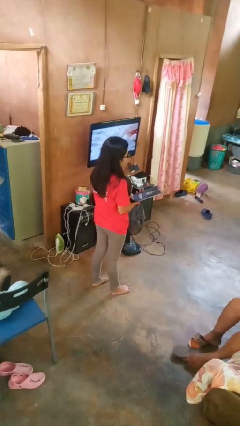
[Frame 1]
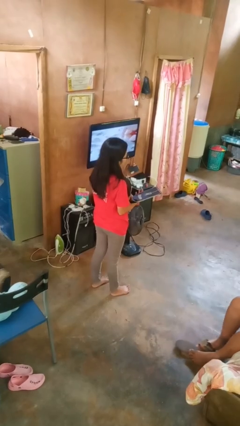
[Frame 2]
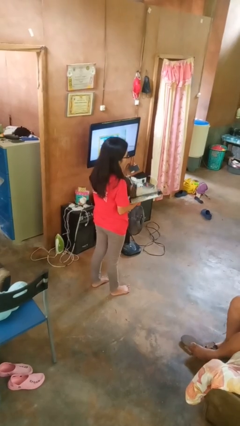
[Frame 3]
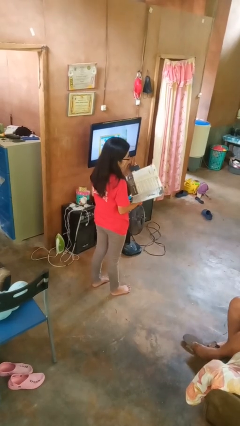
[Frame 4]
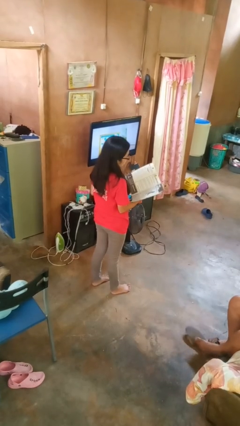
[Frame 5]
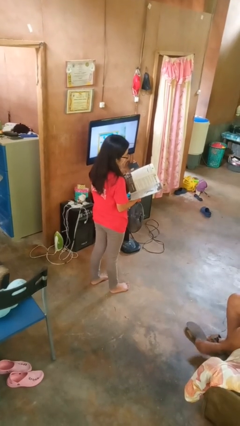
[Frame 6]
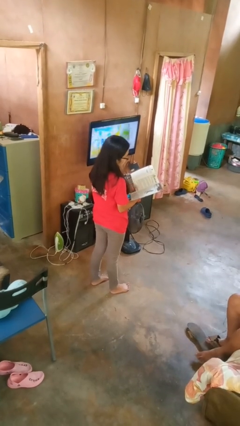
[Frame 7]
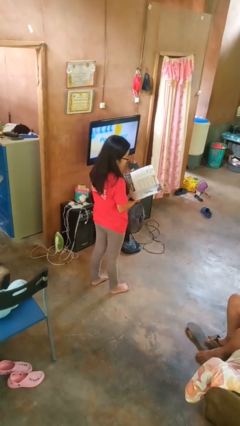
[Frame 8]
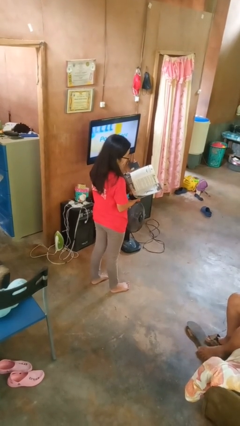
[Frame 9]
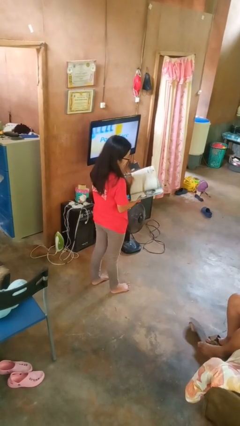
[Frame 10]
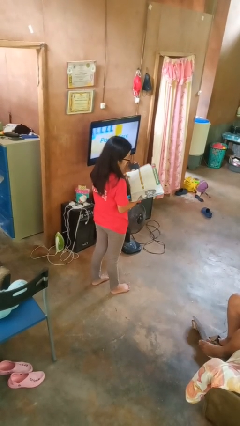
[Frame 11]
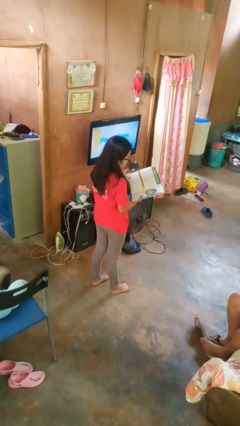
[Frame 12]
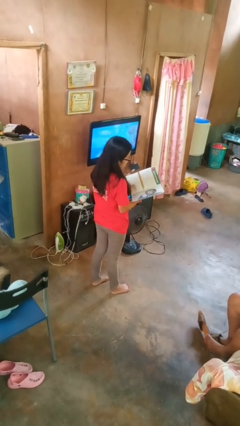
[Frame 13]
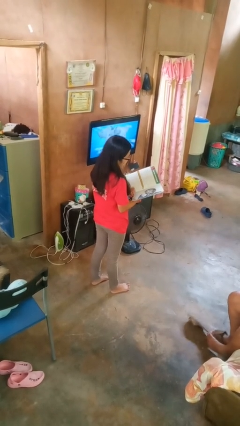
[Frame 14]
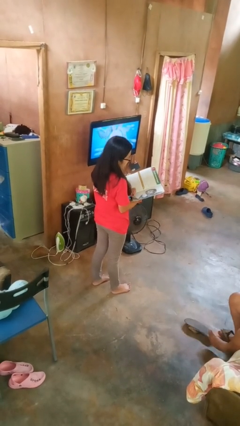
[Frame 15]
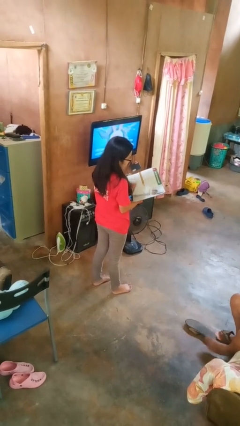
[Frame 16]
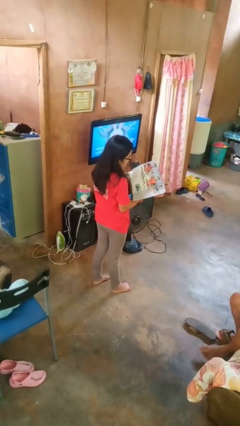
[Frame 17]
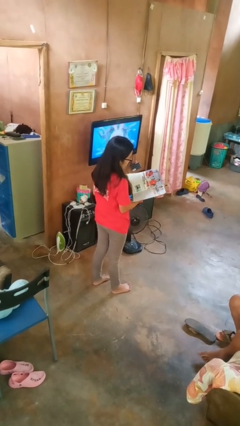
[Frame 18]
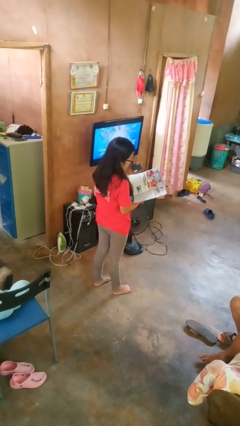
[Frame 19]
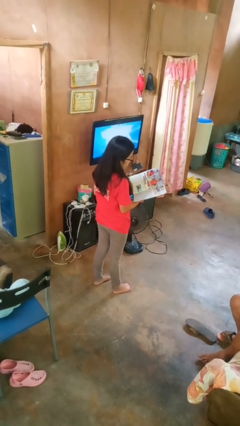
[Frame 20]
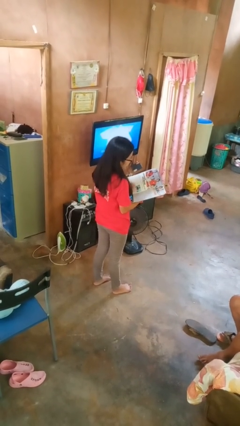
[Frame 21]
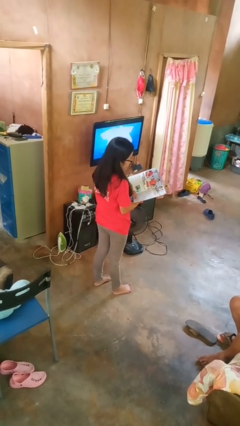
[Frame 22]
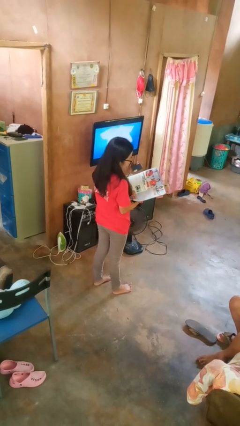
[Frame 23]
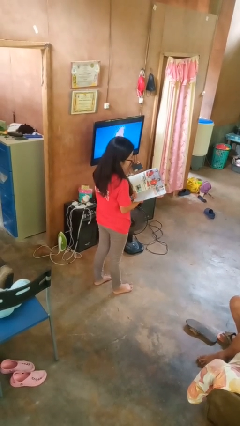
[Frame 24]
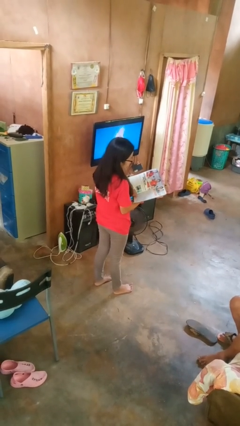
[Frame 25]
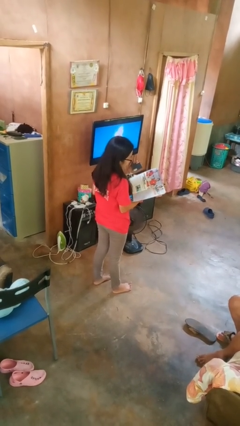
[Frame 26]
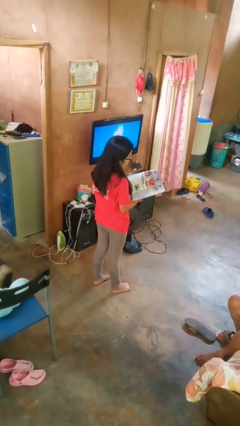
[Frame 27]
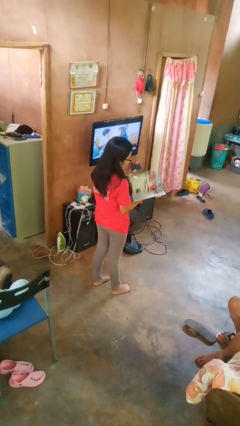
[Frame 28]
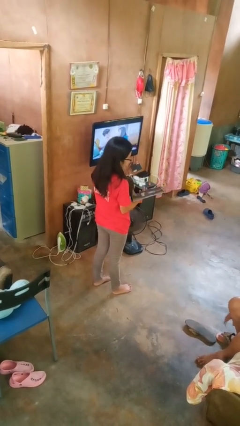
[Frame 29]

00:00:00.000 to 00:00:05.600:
person reads magazine

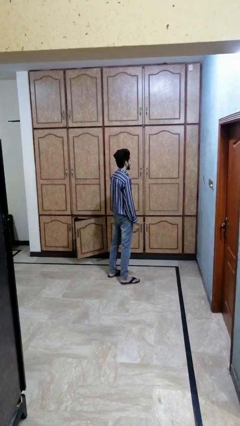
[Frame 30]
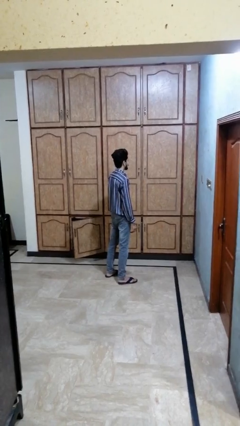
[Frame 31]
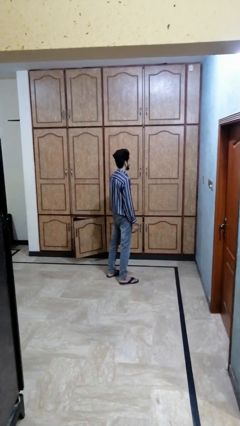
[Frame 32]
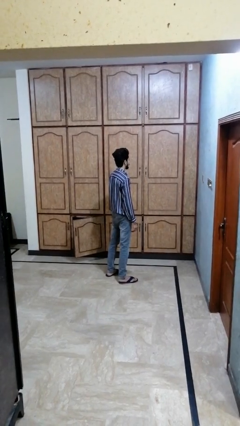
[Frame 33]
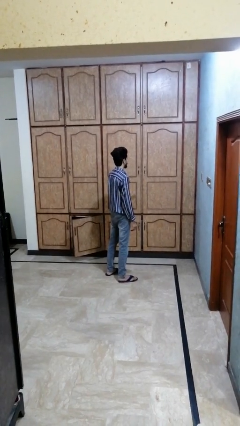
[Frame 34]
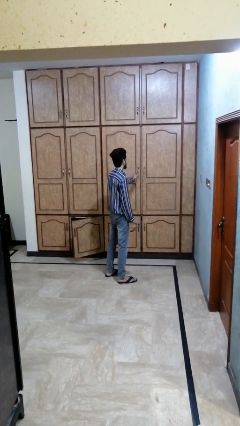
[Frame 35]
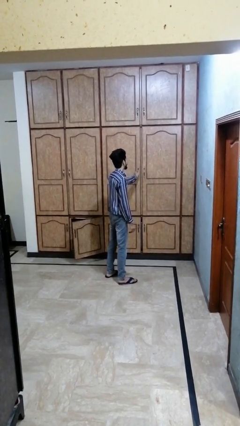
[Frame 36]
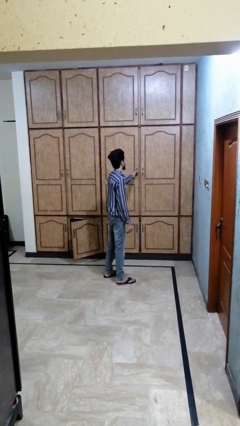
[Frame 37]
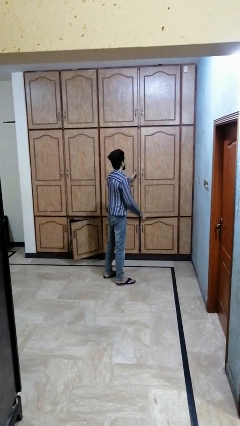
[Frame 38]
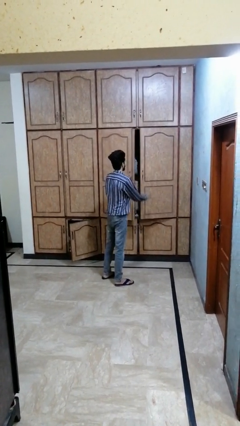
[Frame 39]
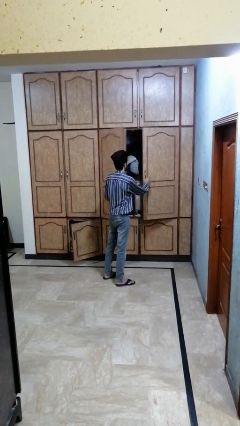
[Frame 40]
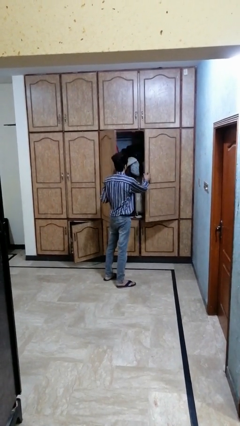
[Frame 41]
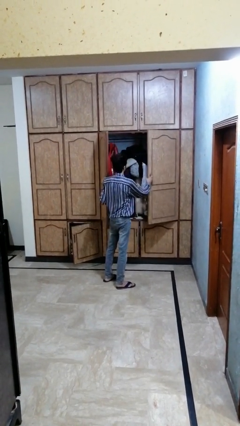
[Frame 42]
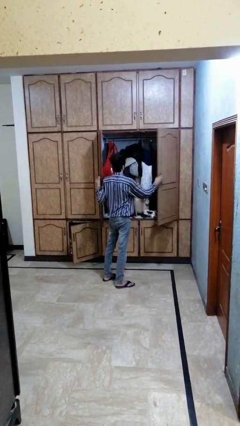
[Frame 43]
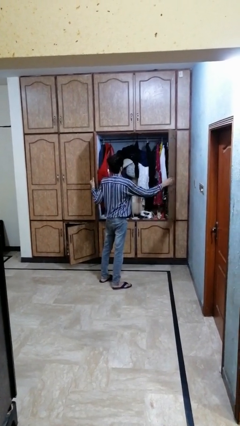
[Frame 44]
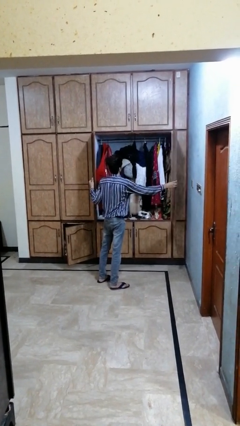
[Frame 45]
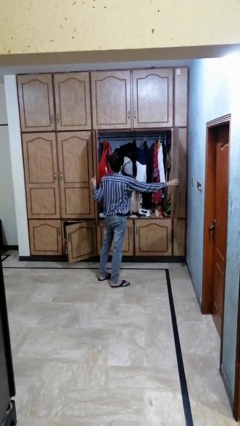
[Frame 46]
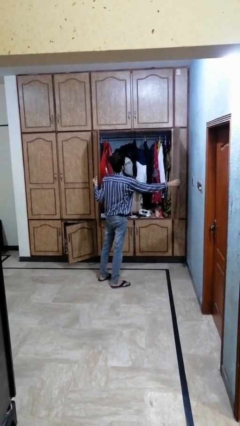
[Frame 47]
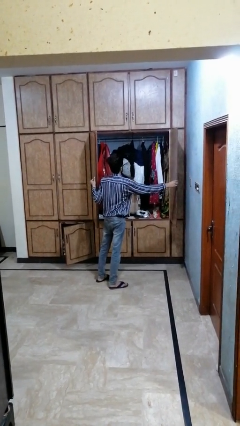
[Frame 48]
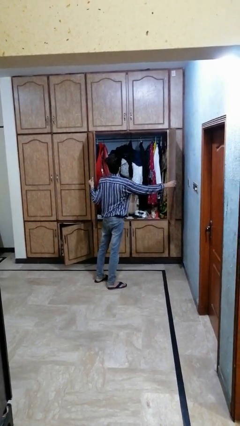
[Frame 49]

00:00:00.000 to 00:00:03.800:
person opens dresser drawer

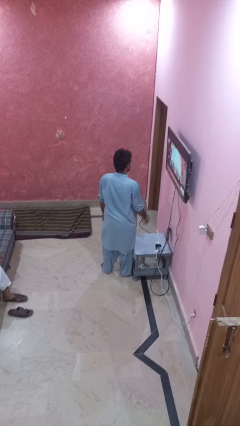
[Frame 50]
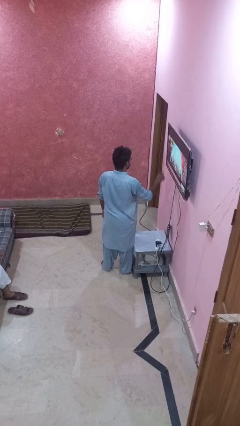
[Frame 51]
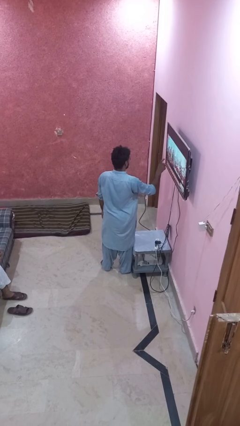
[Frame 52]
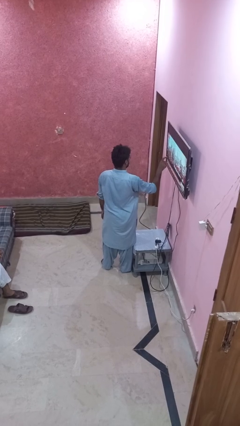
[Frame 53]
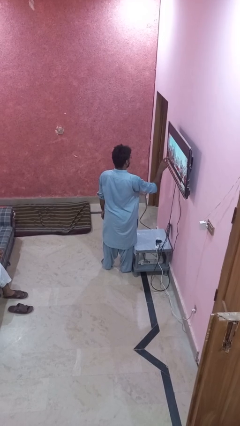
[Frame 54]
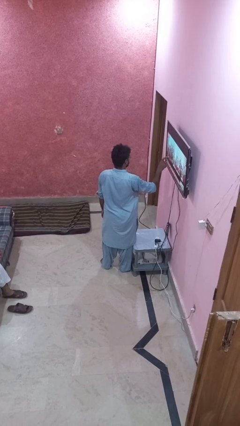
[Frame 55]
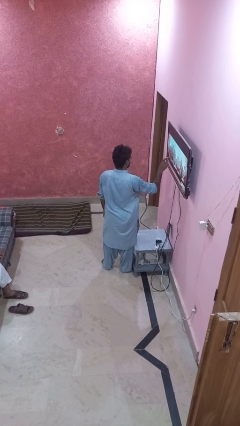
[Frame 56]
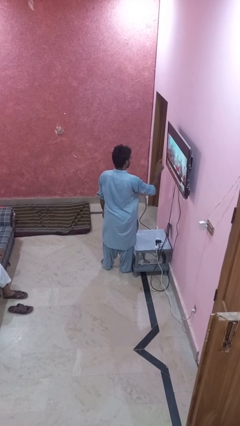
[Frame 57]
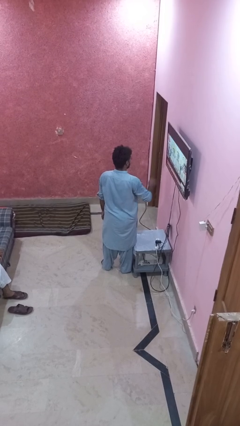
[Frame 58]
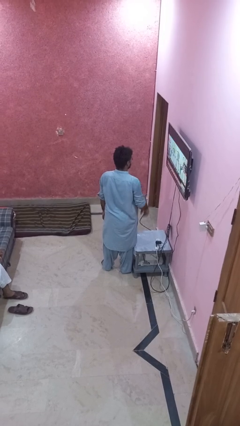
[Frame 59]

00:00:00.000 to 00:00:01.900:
person taps object with finger

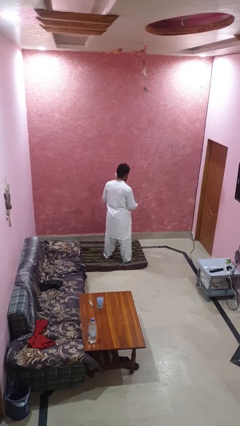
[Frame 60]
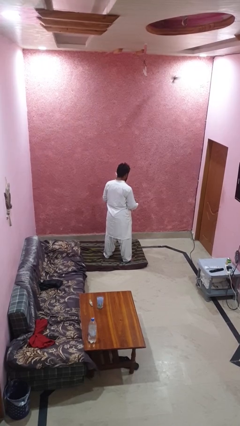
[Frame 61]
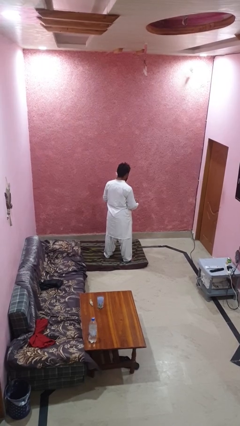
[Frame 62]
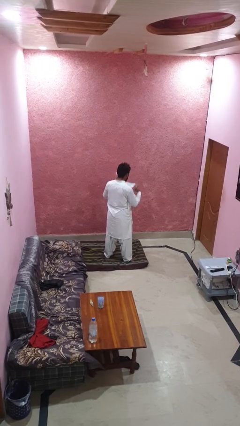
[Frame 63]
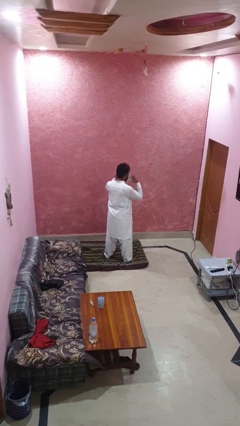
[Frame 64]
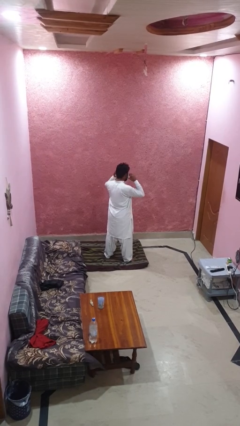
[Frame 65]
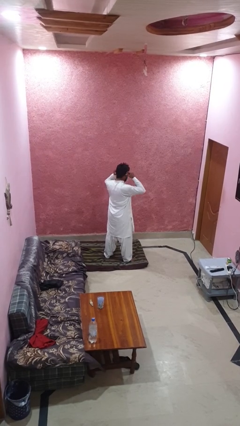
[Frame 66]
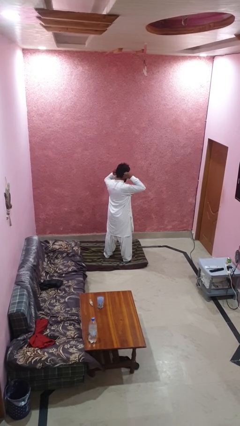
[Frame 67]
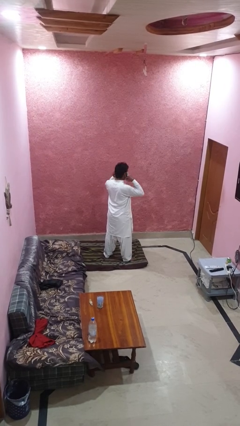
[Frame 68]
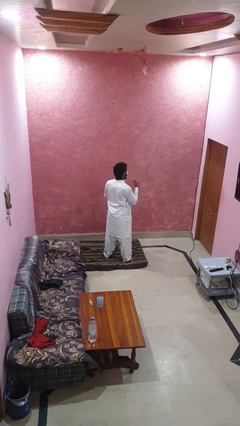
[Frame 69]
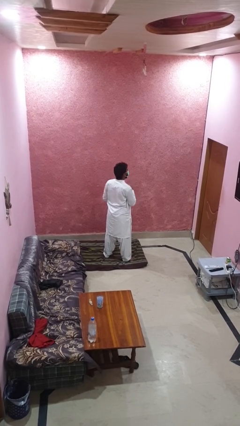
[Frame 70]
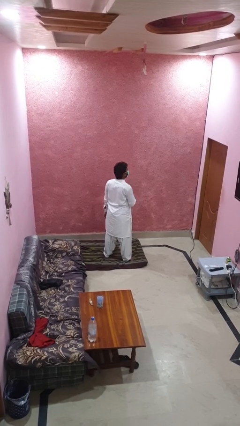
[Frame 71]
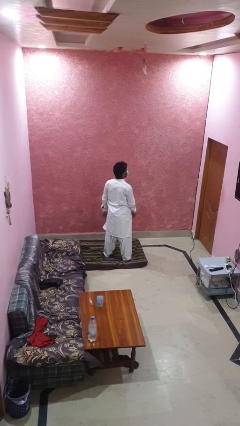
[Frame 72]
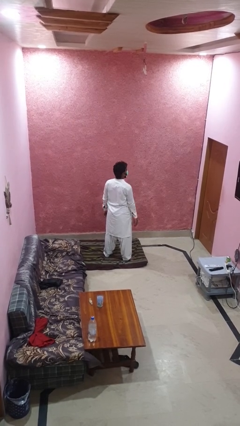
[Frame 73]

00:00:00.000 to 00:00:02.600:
person puts on facemask

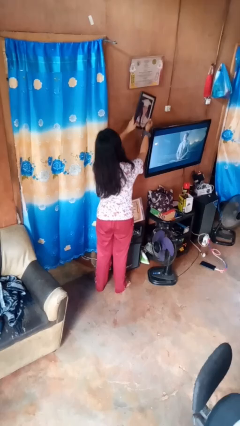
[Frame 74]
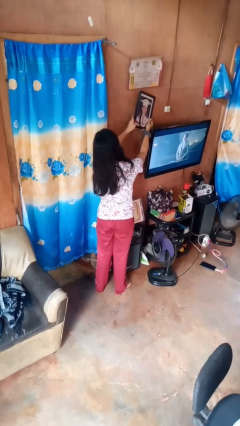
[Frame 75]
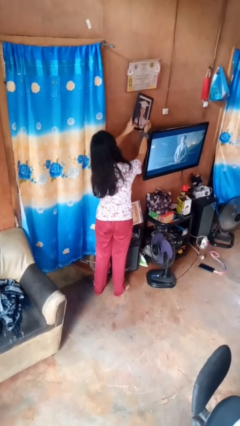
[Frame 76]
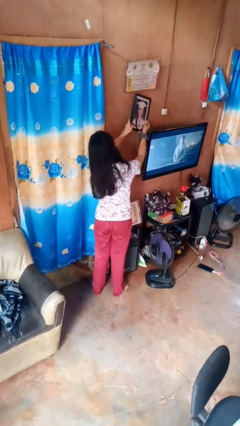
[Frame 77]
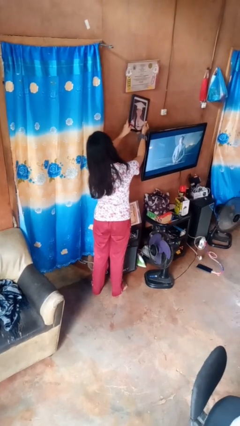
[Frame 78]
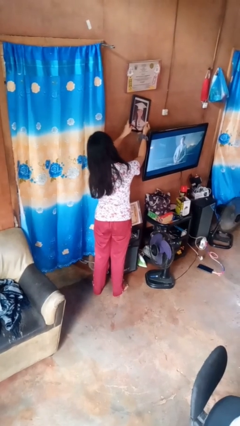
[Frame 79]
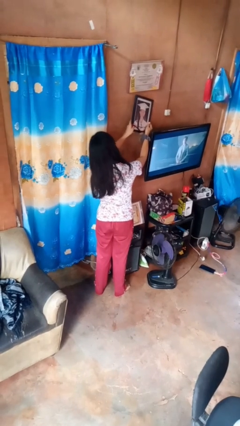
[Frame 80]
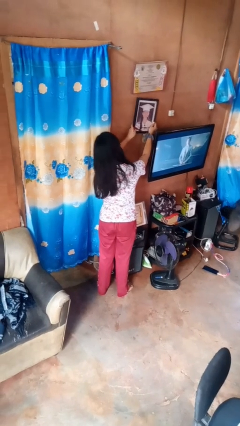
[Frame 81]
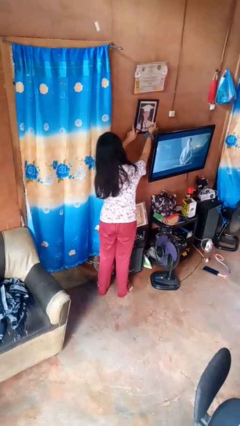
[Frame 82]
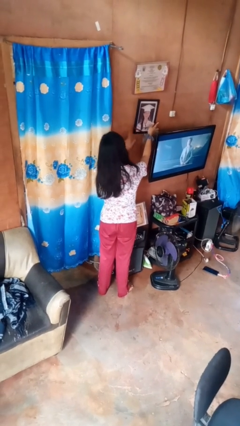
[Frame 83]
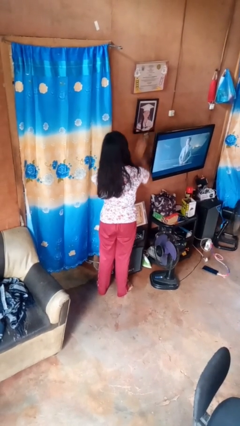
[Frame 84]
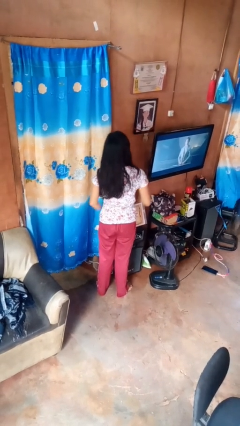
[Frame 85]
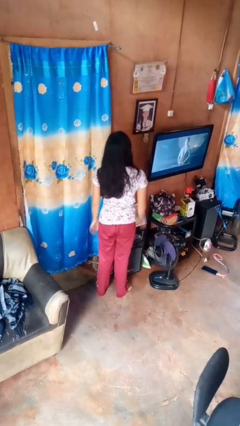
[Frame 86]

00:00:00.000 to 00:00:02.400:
person puts up picture frame

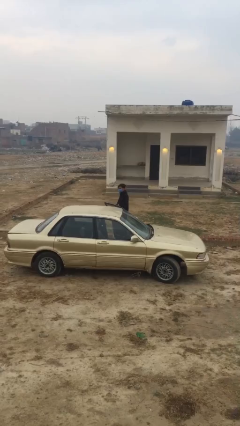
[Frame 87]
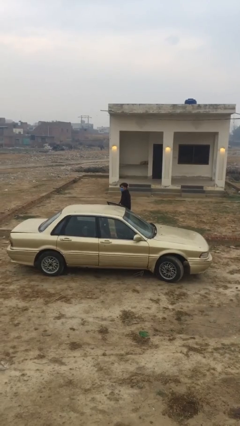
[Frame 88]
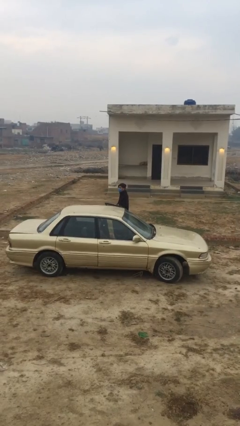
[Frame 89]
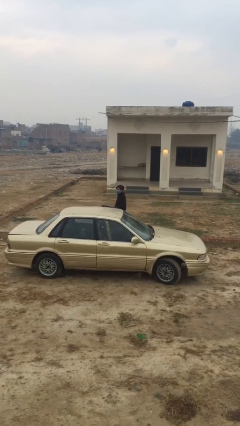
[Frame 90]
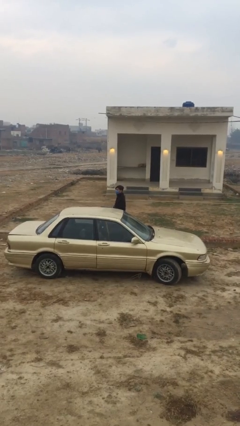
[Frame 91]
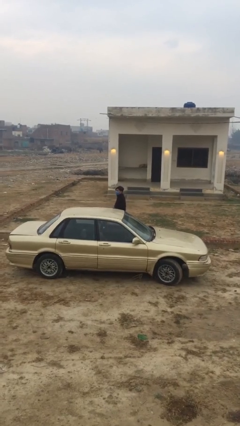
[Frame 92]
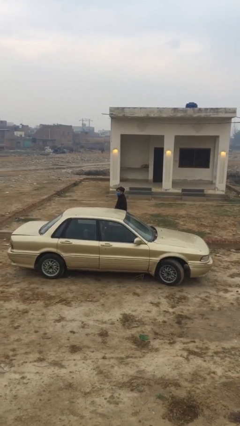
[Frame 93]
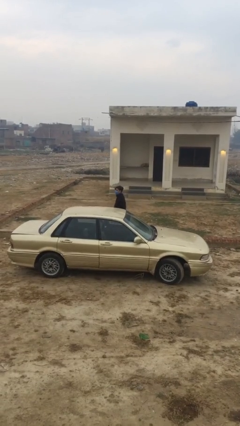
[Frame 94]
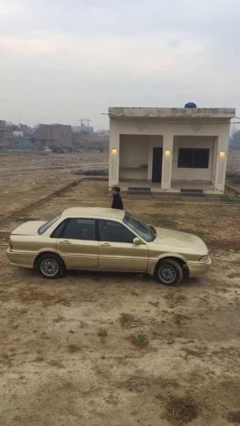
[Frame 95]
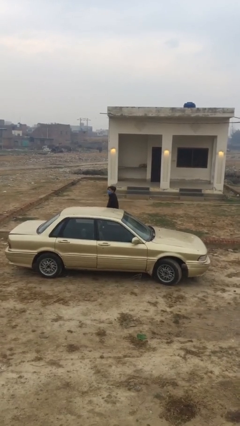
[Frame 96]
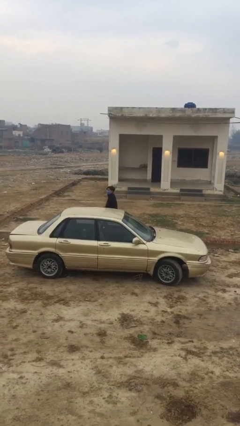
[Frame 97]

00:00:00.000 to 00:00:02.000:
person closes car door
